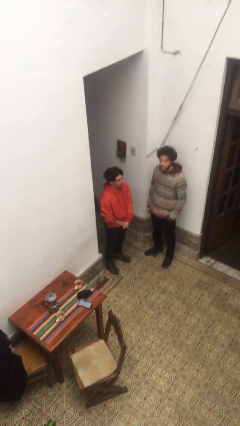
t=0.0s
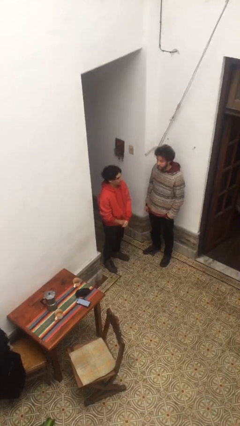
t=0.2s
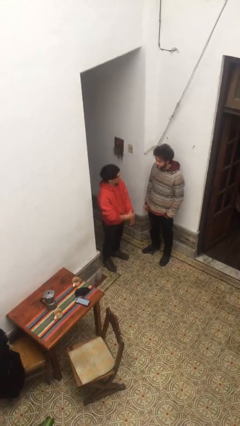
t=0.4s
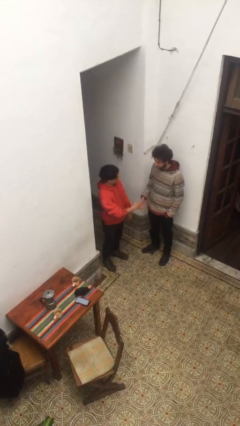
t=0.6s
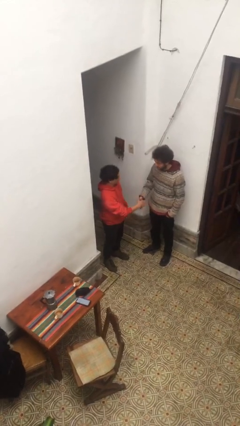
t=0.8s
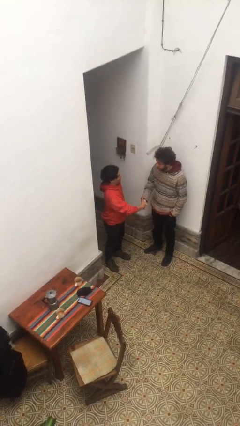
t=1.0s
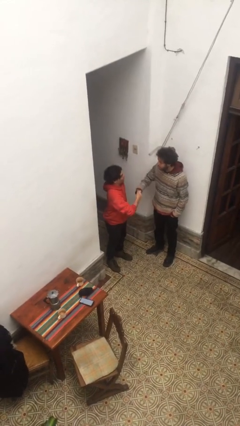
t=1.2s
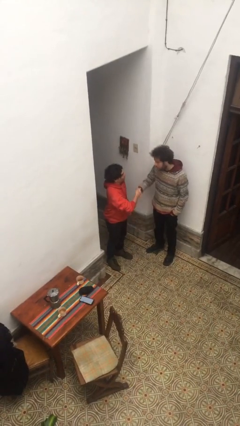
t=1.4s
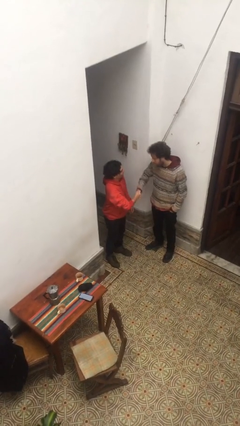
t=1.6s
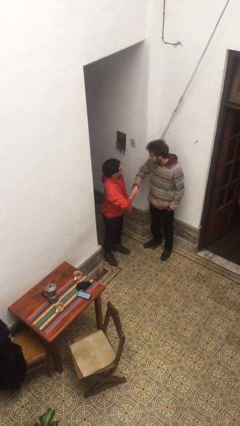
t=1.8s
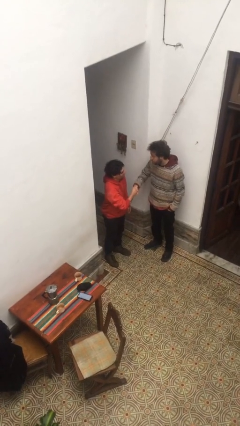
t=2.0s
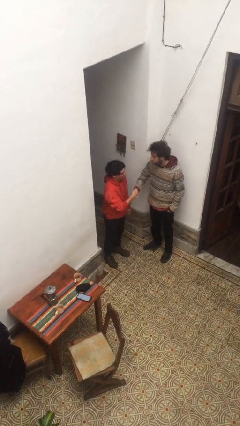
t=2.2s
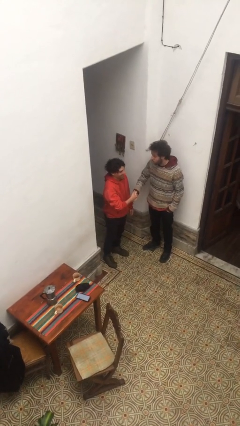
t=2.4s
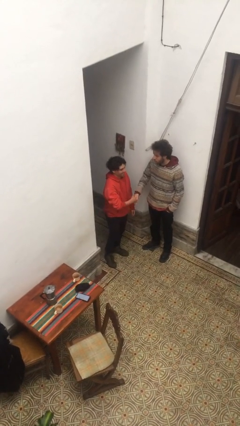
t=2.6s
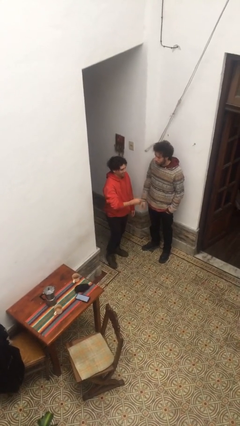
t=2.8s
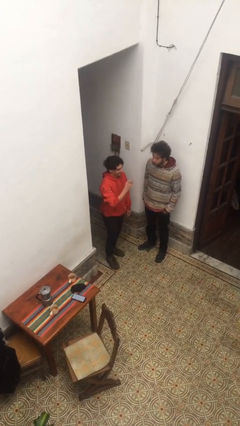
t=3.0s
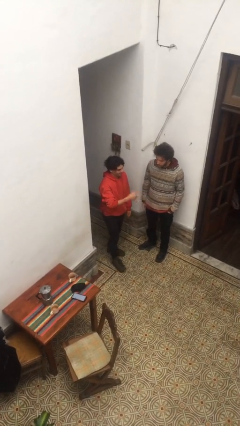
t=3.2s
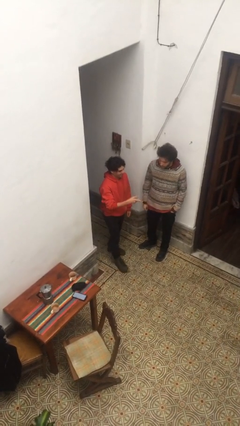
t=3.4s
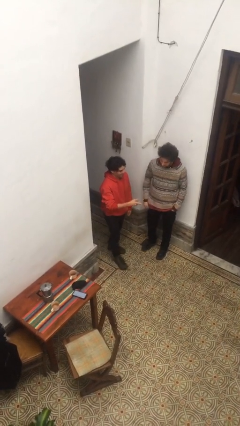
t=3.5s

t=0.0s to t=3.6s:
person shakes hand

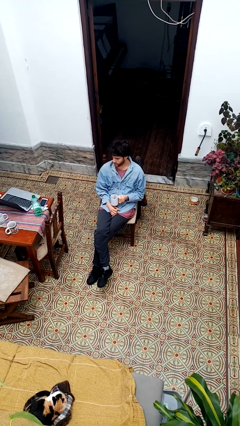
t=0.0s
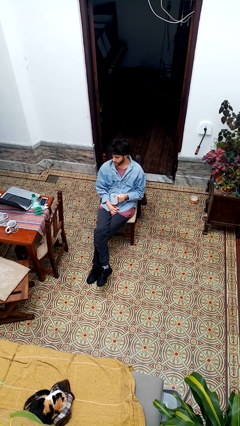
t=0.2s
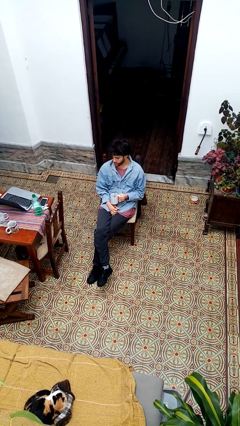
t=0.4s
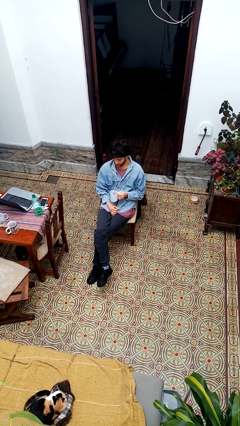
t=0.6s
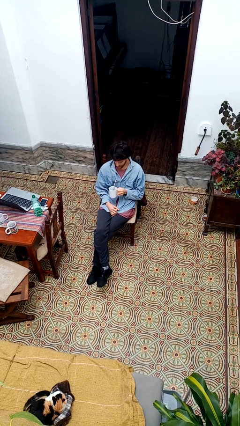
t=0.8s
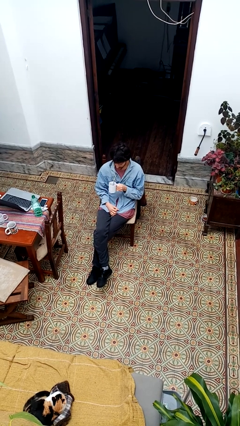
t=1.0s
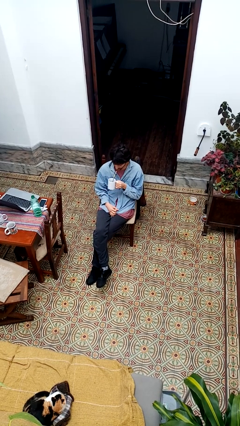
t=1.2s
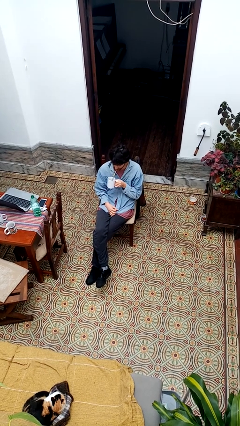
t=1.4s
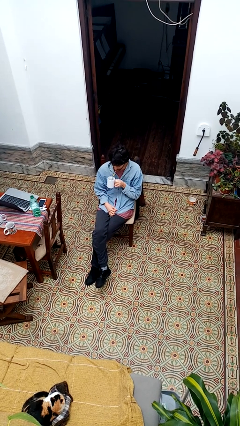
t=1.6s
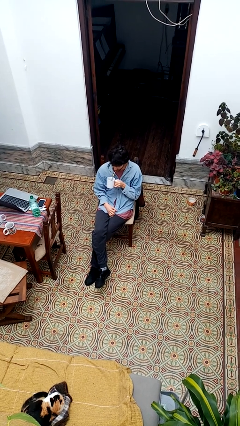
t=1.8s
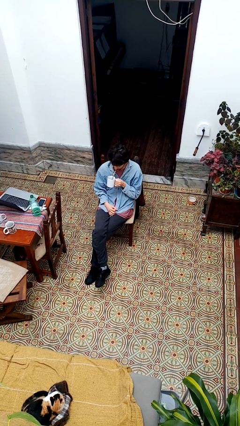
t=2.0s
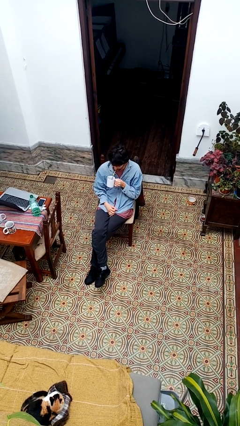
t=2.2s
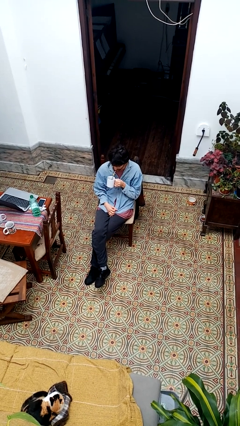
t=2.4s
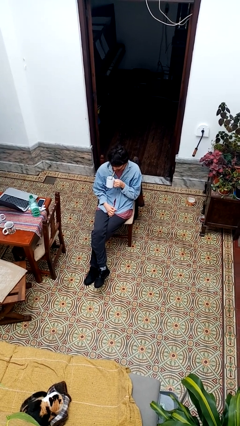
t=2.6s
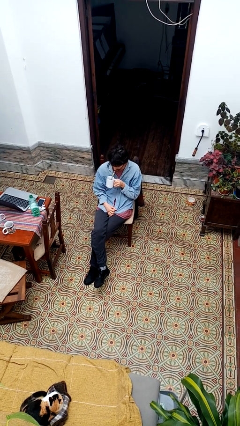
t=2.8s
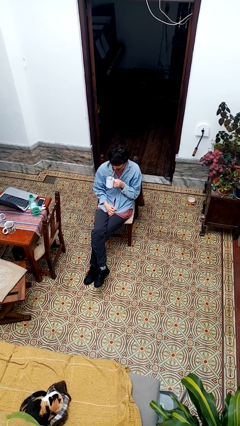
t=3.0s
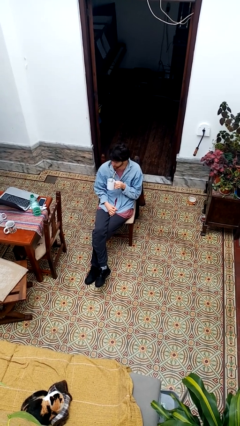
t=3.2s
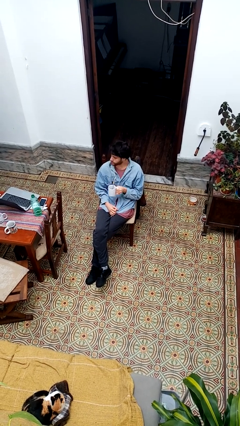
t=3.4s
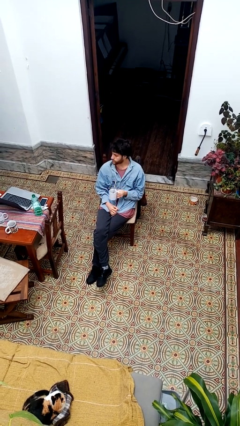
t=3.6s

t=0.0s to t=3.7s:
person drinks from straw

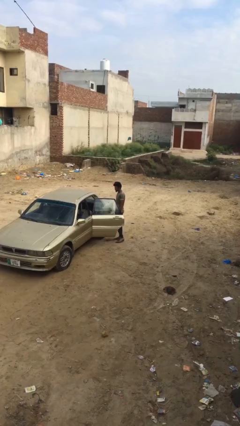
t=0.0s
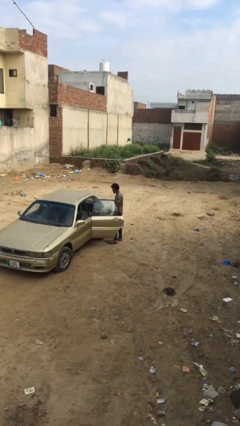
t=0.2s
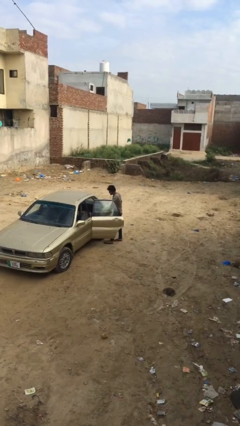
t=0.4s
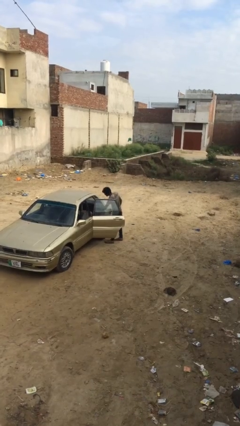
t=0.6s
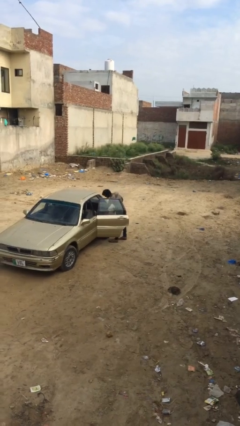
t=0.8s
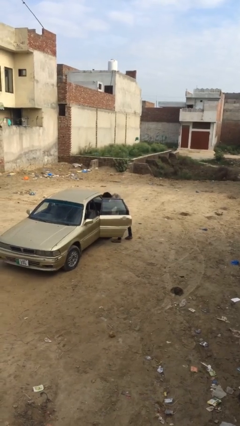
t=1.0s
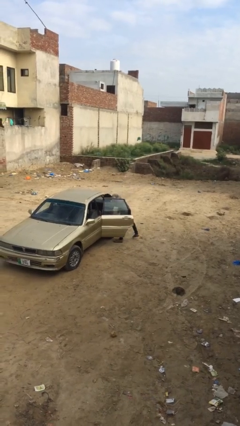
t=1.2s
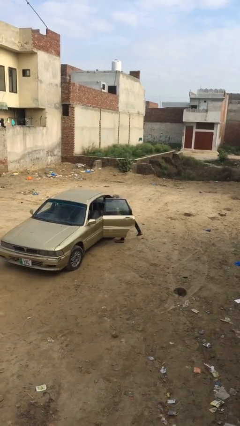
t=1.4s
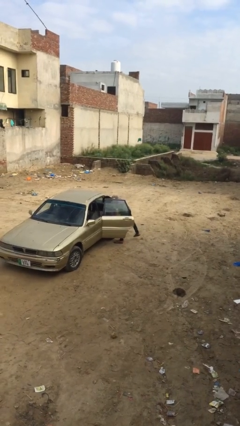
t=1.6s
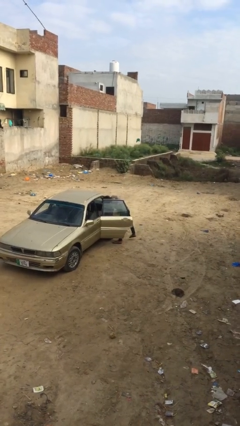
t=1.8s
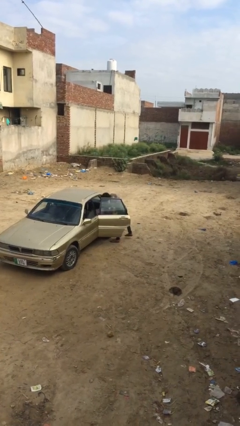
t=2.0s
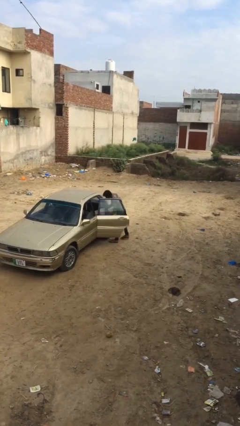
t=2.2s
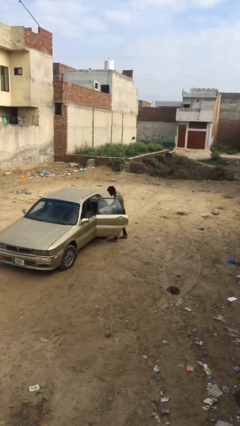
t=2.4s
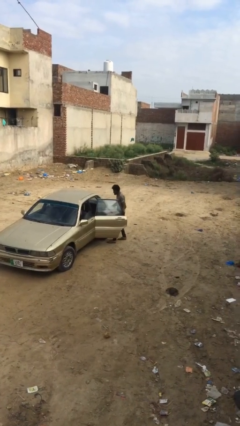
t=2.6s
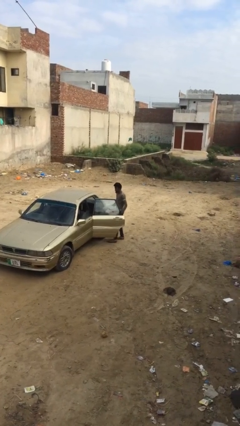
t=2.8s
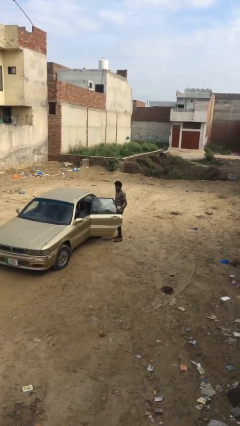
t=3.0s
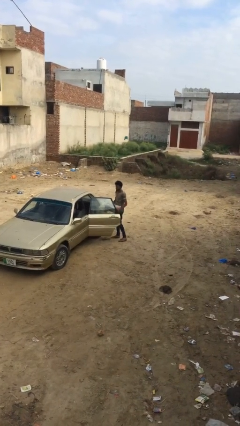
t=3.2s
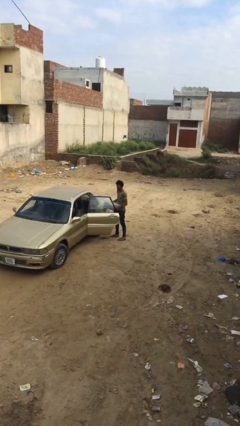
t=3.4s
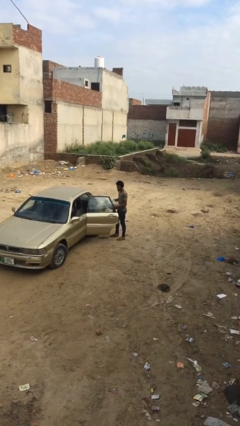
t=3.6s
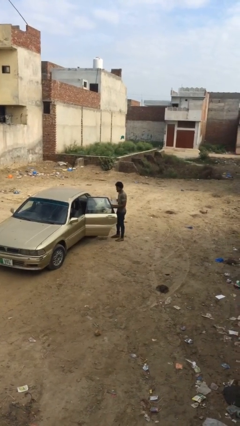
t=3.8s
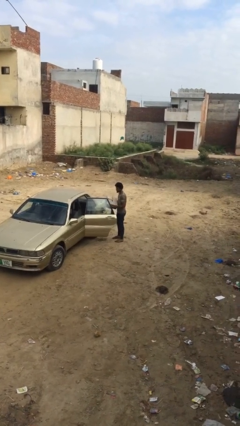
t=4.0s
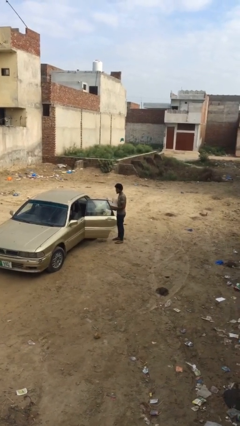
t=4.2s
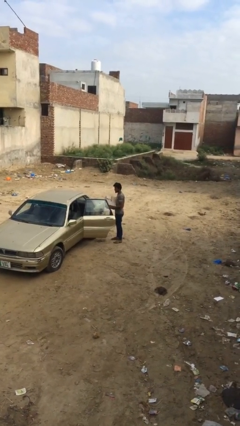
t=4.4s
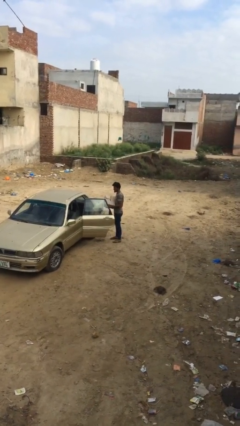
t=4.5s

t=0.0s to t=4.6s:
person unloads car

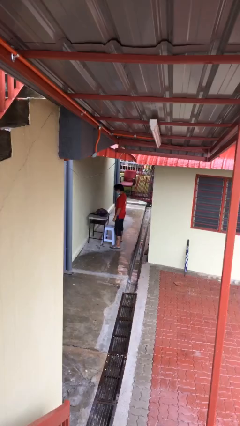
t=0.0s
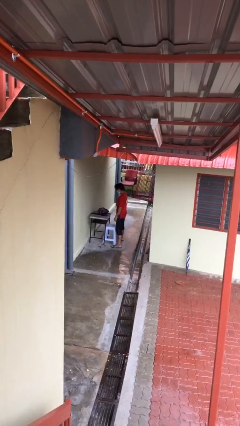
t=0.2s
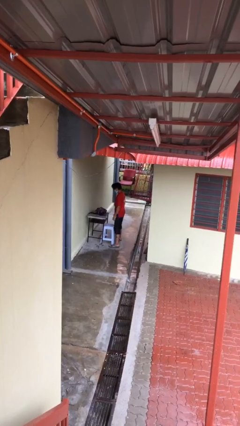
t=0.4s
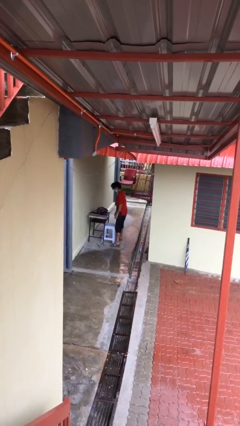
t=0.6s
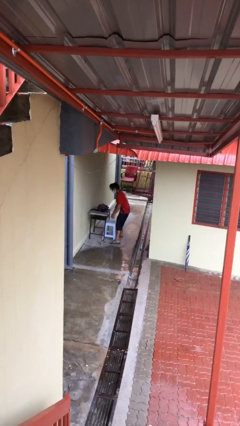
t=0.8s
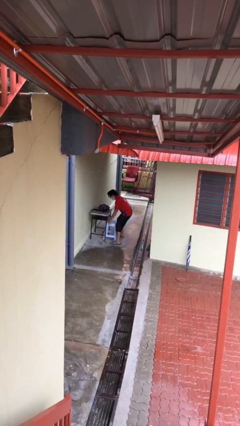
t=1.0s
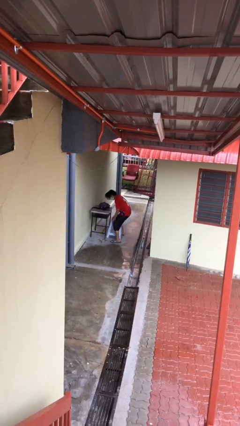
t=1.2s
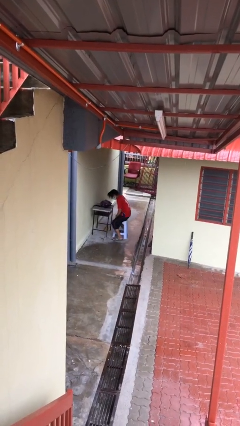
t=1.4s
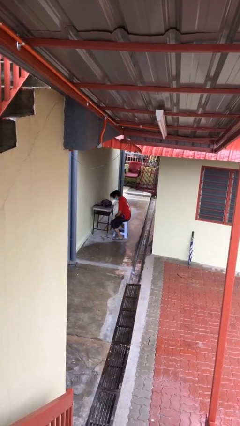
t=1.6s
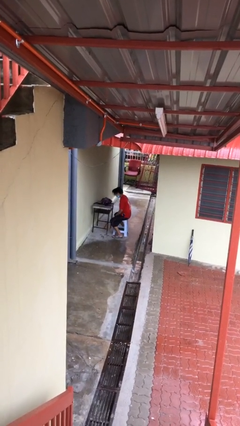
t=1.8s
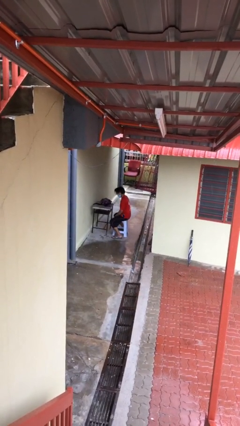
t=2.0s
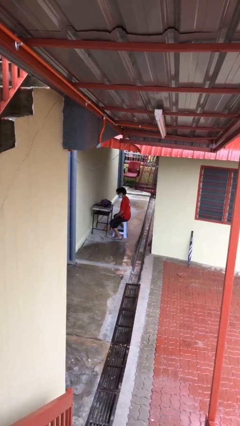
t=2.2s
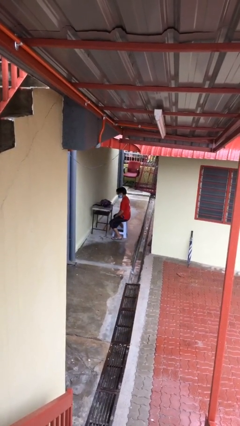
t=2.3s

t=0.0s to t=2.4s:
person sits down

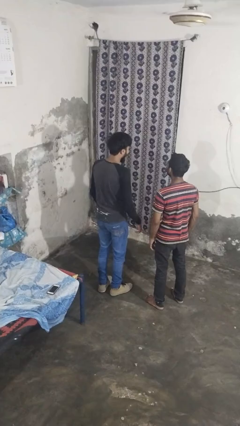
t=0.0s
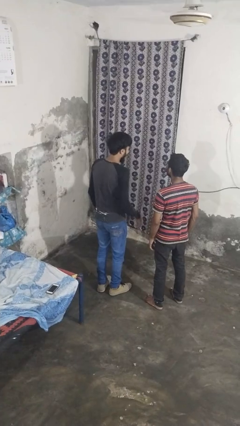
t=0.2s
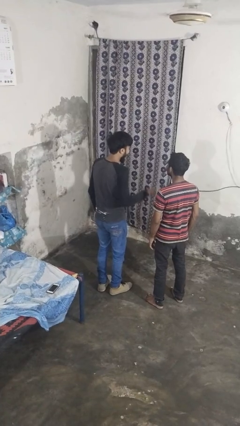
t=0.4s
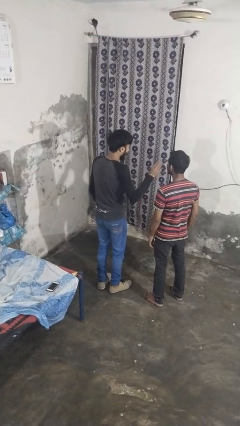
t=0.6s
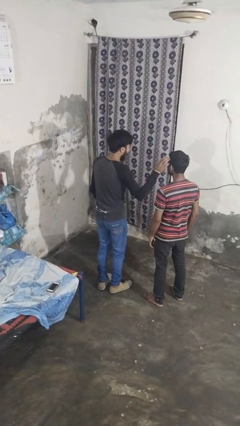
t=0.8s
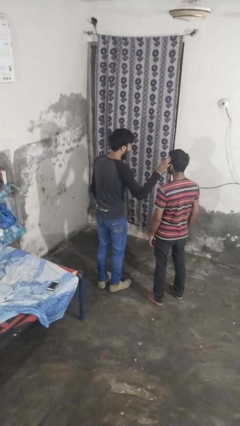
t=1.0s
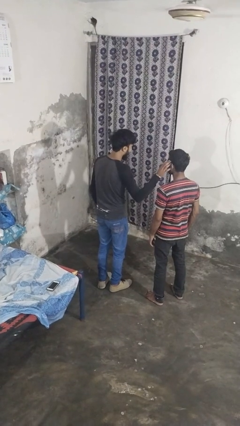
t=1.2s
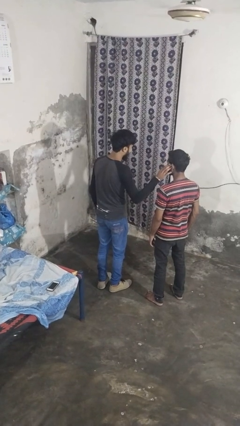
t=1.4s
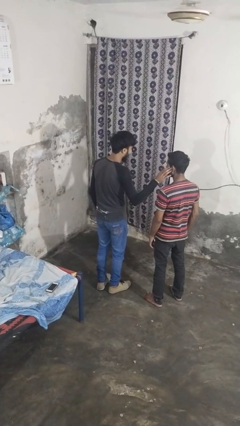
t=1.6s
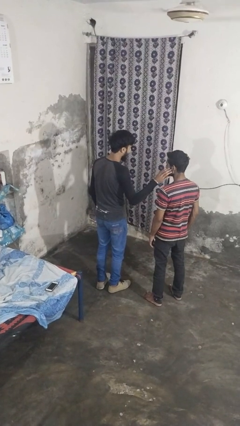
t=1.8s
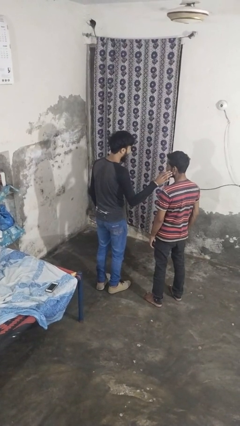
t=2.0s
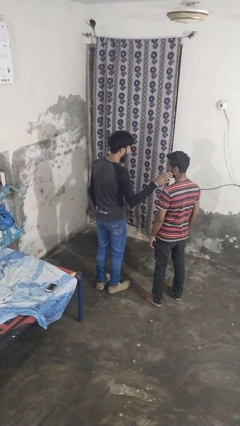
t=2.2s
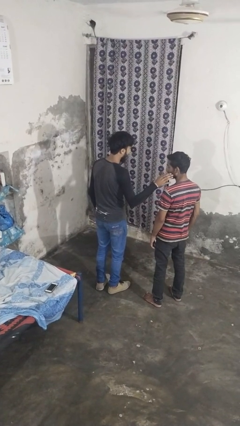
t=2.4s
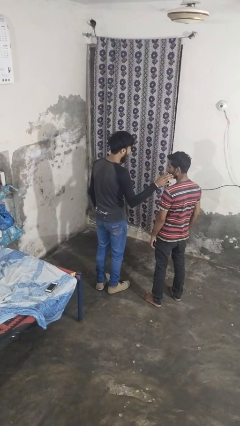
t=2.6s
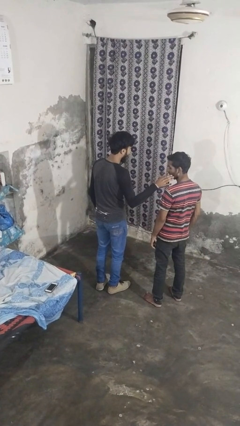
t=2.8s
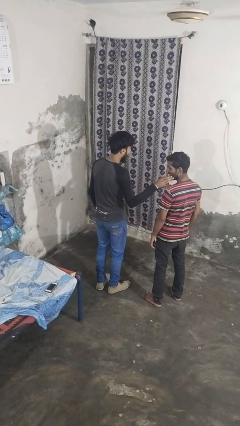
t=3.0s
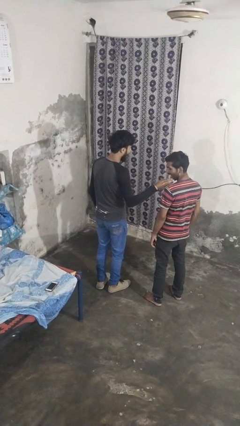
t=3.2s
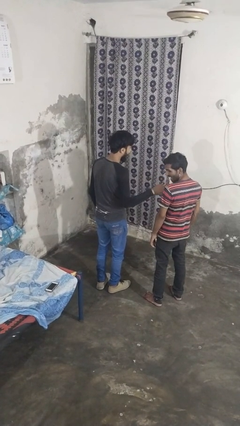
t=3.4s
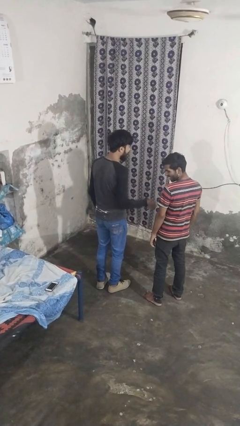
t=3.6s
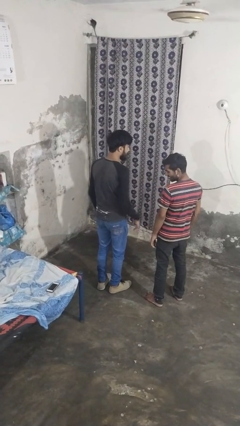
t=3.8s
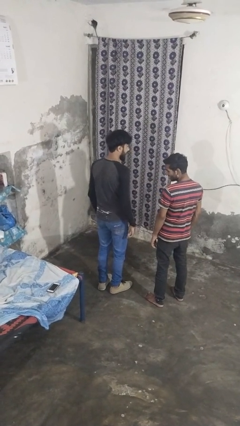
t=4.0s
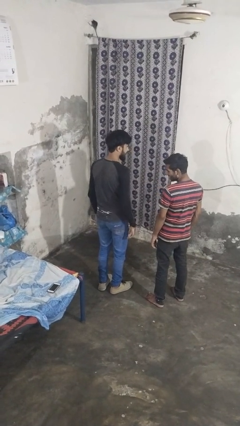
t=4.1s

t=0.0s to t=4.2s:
person touches face of person
